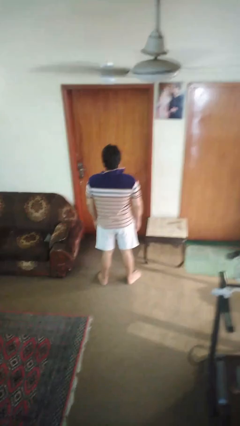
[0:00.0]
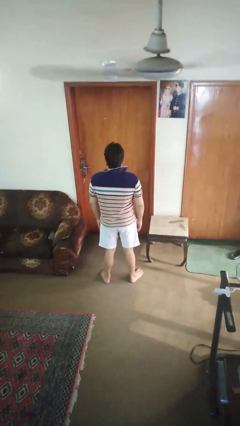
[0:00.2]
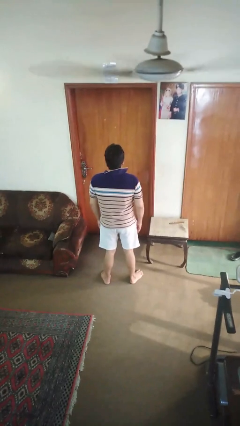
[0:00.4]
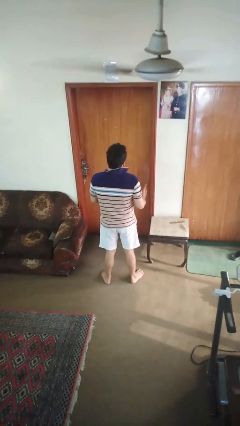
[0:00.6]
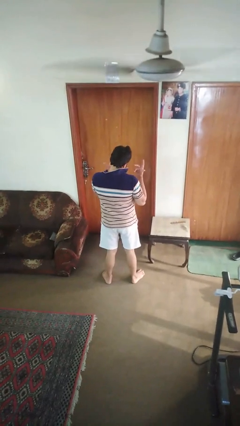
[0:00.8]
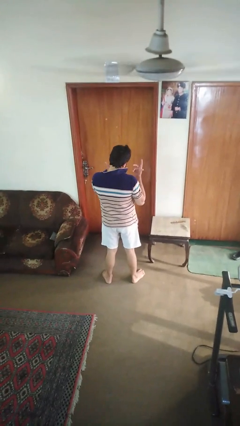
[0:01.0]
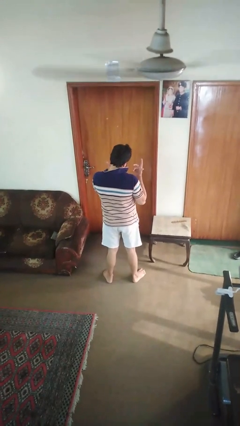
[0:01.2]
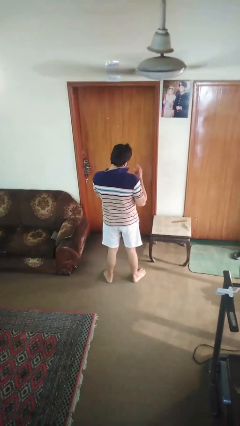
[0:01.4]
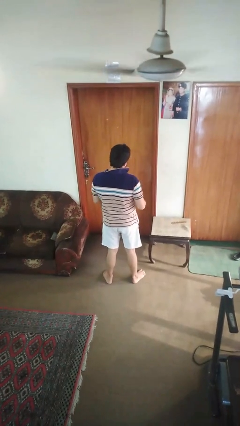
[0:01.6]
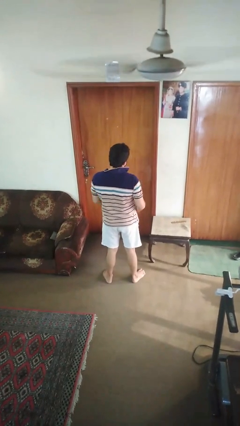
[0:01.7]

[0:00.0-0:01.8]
person shrugs

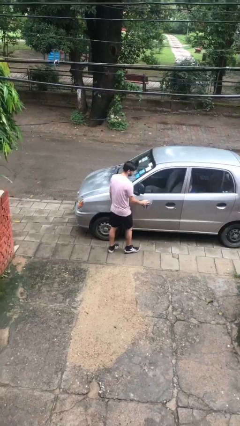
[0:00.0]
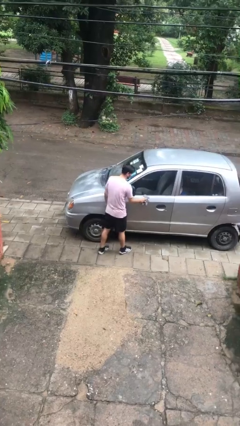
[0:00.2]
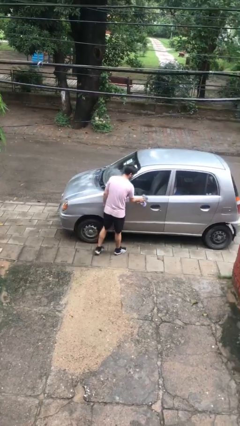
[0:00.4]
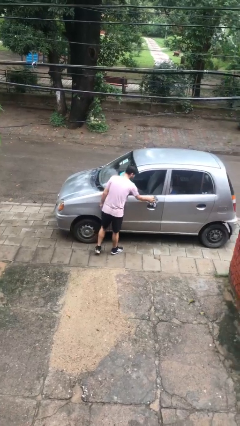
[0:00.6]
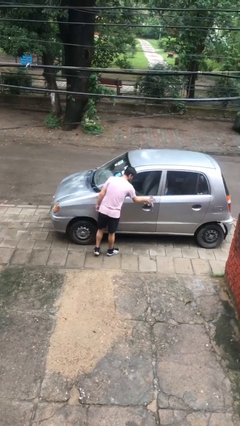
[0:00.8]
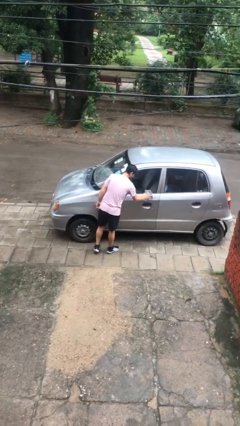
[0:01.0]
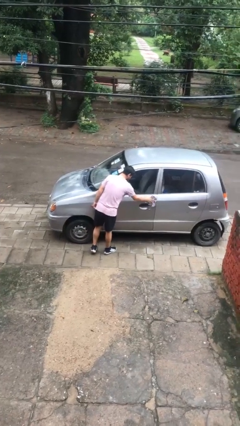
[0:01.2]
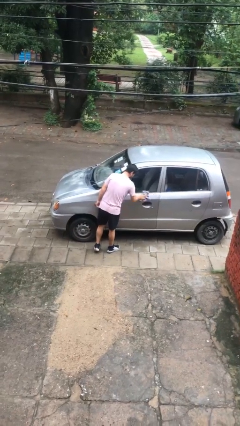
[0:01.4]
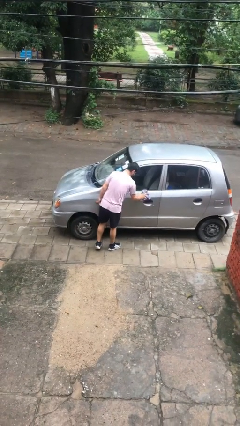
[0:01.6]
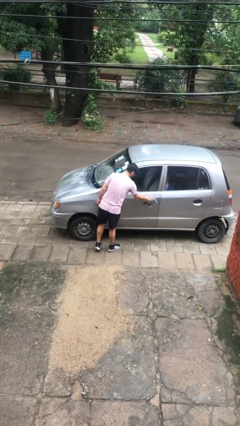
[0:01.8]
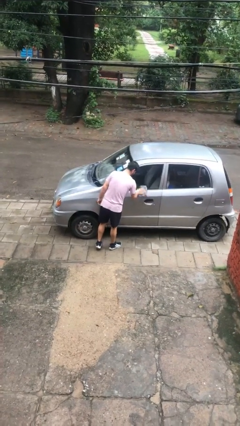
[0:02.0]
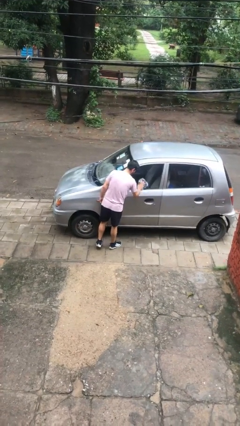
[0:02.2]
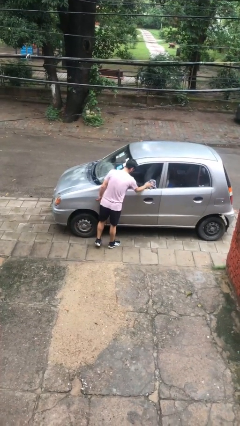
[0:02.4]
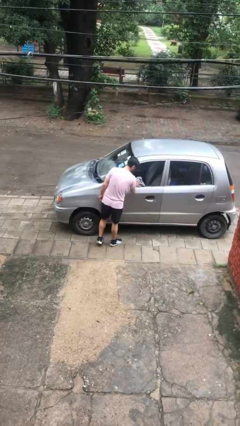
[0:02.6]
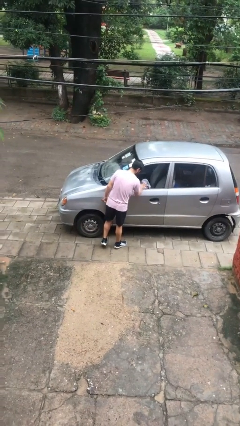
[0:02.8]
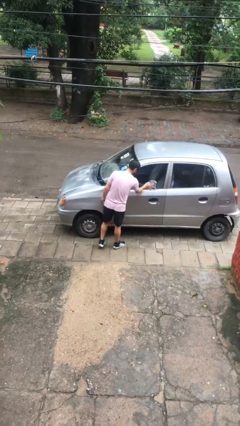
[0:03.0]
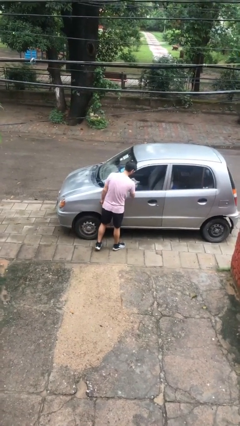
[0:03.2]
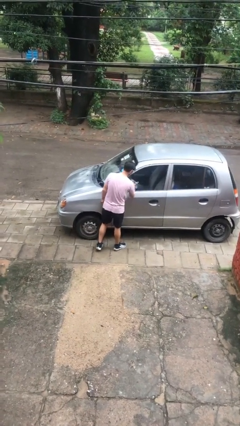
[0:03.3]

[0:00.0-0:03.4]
person polishes car with rag

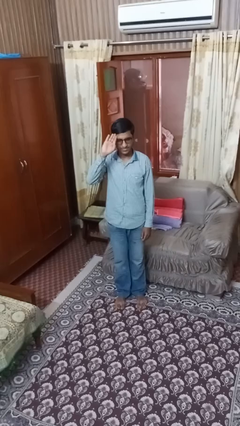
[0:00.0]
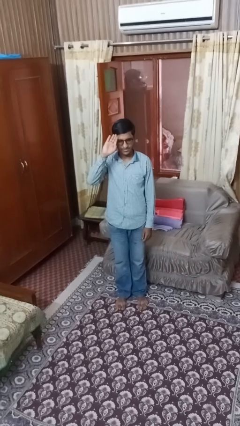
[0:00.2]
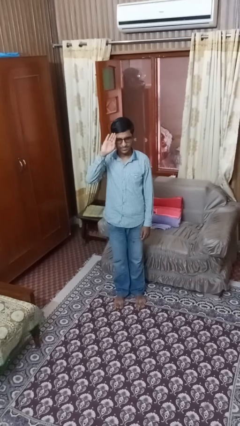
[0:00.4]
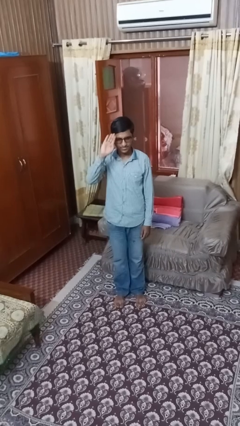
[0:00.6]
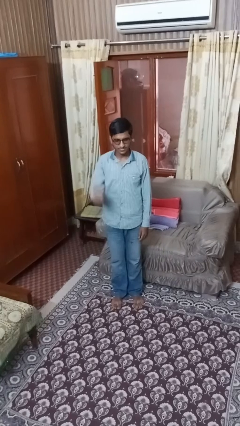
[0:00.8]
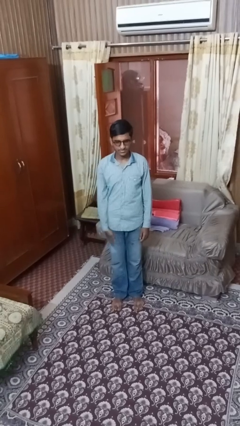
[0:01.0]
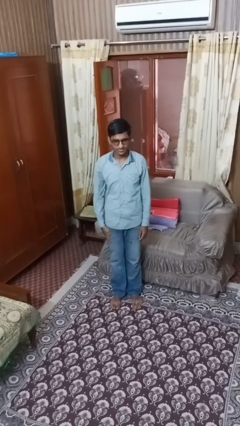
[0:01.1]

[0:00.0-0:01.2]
person salutes

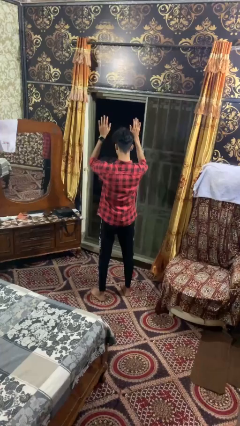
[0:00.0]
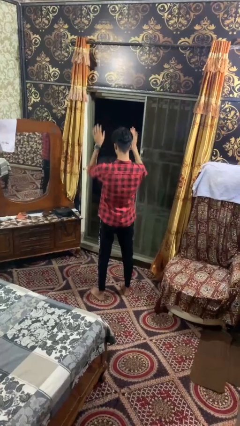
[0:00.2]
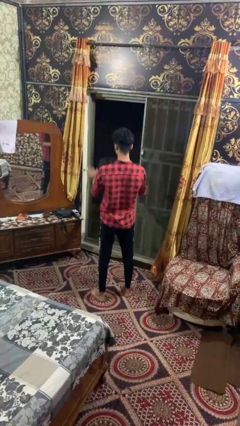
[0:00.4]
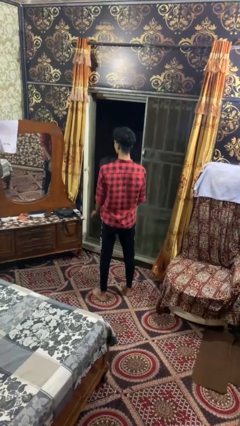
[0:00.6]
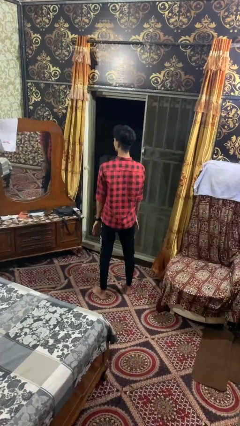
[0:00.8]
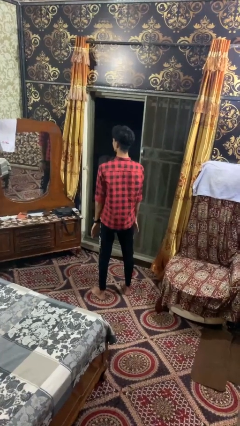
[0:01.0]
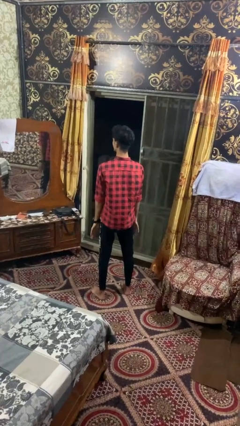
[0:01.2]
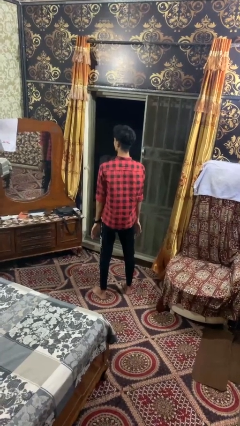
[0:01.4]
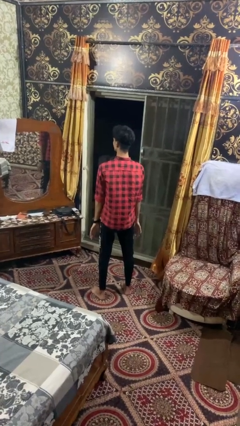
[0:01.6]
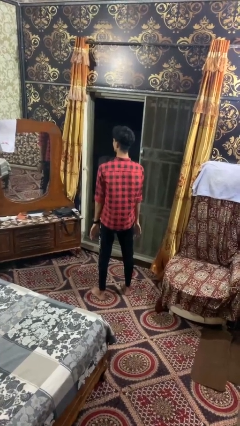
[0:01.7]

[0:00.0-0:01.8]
person gestures swipe down

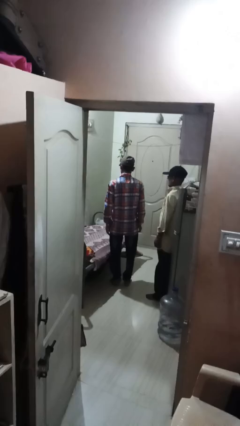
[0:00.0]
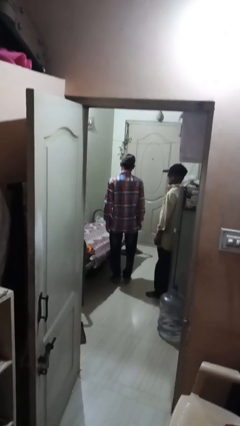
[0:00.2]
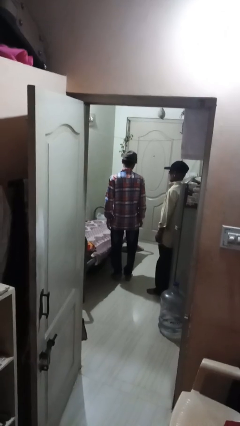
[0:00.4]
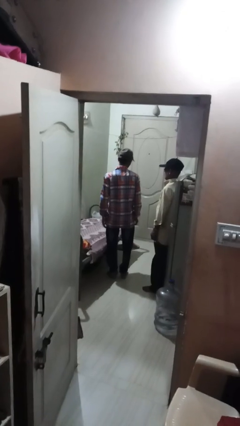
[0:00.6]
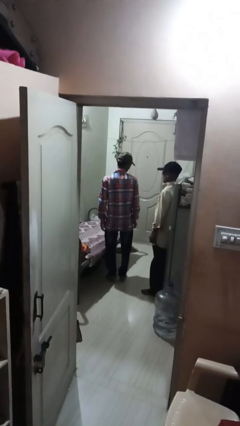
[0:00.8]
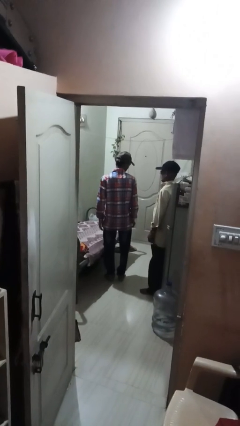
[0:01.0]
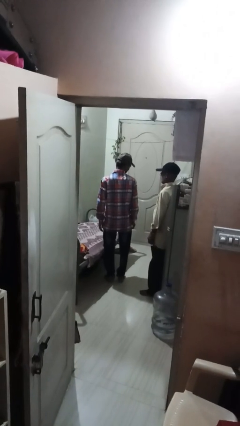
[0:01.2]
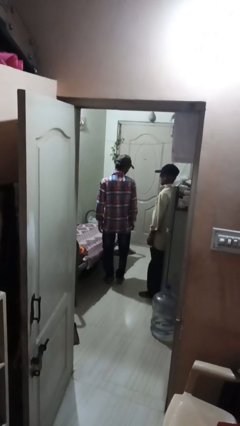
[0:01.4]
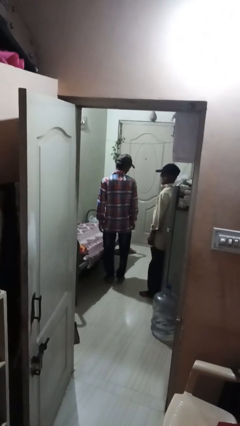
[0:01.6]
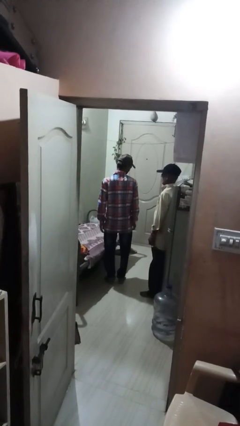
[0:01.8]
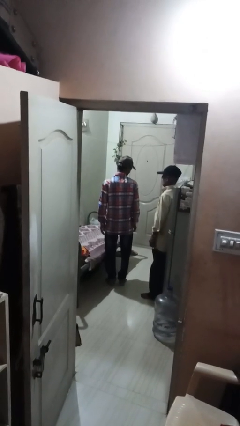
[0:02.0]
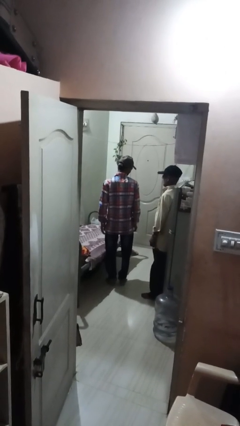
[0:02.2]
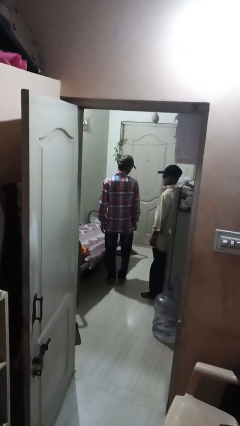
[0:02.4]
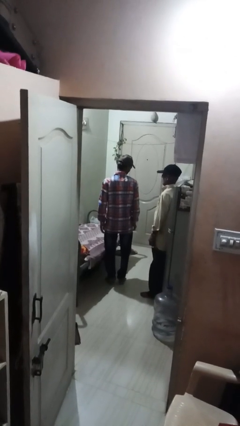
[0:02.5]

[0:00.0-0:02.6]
person looks over shoulder

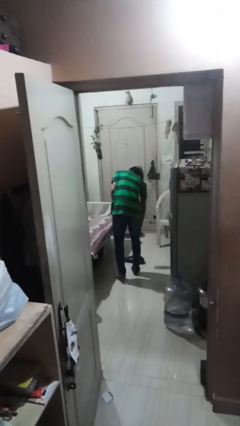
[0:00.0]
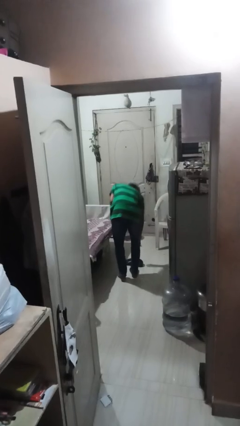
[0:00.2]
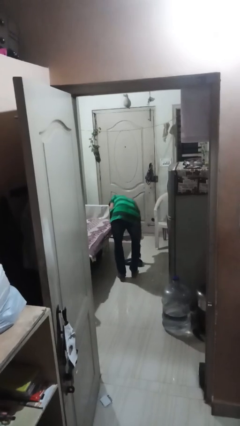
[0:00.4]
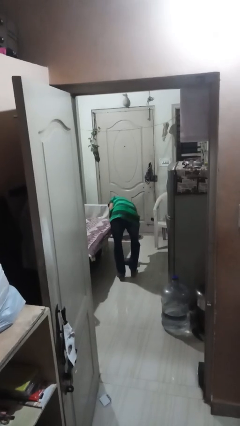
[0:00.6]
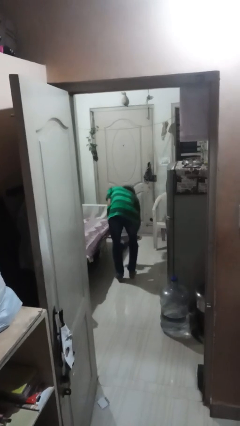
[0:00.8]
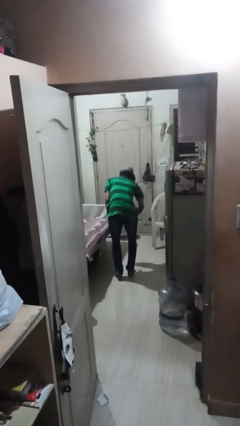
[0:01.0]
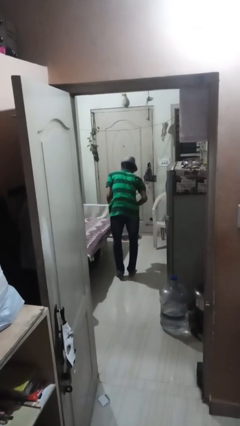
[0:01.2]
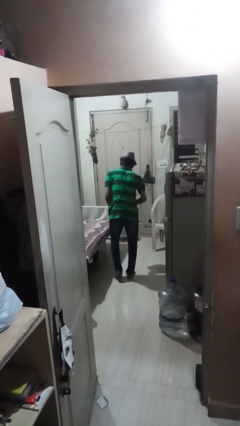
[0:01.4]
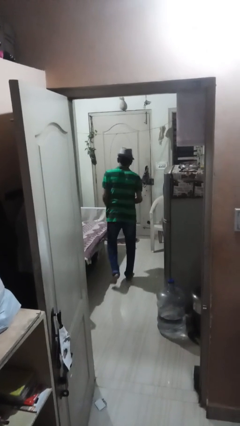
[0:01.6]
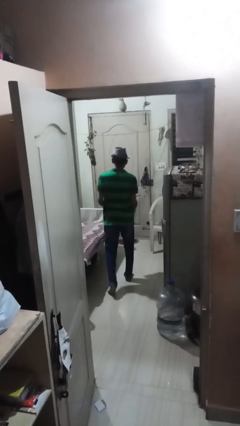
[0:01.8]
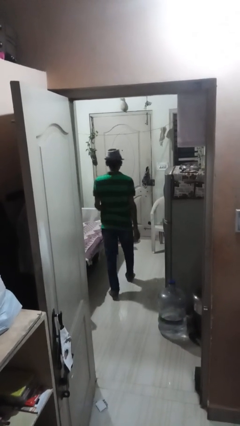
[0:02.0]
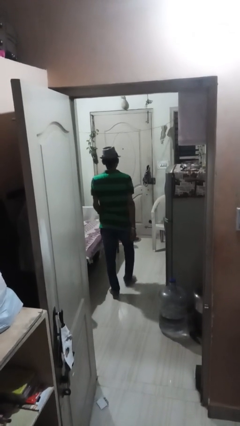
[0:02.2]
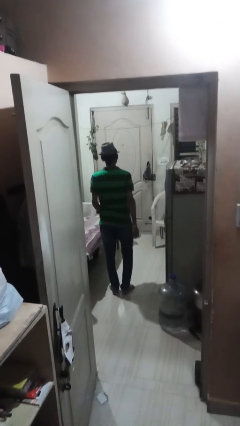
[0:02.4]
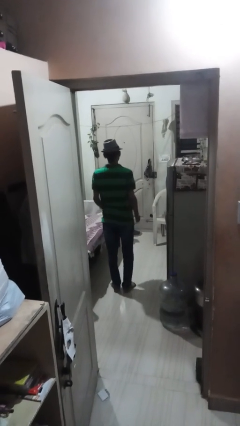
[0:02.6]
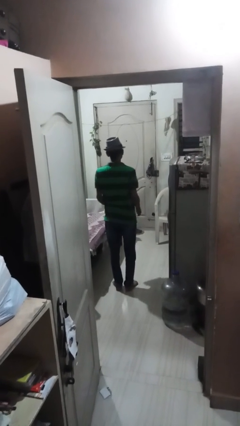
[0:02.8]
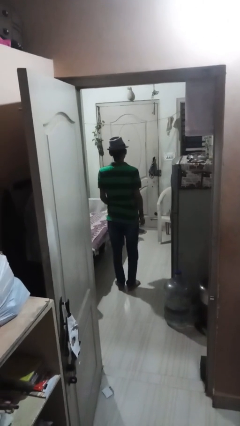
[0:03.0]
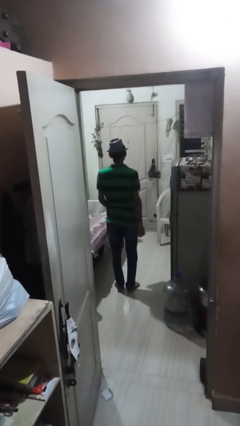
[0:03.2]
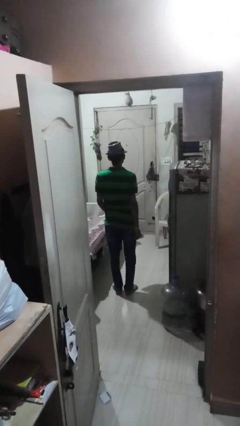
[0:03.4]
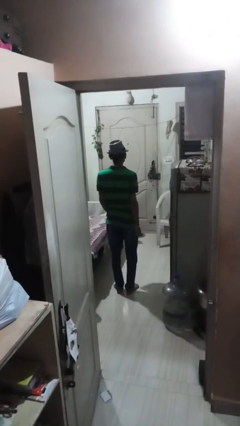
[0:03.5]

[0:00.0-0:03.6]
person picks up object from floor

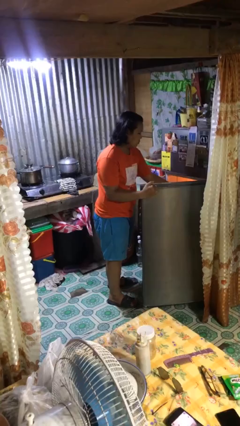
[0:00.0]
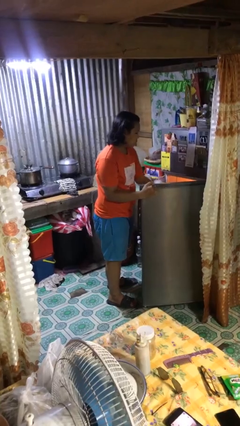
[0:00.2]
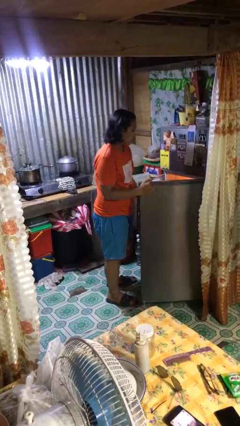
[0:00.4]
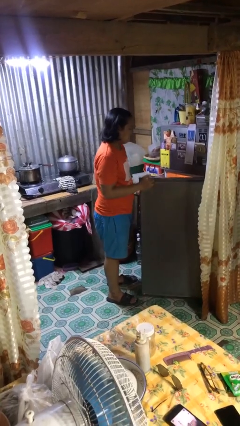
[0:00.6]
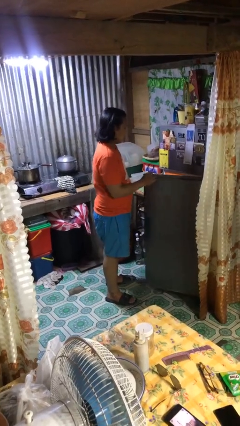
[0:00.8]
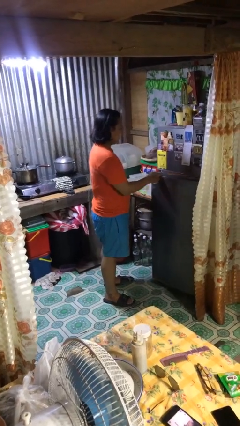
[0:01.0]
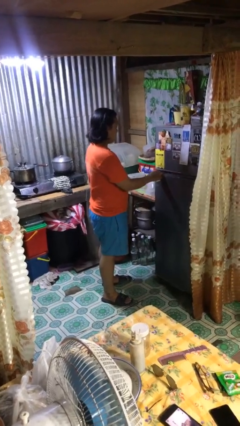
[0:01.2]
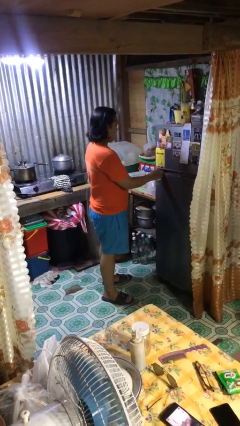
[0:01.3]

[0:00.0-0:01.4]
person closes refrigerator

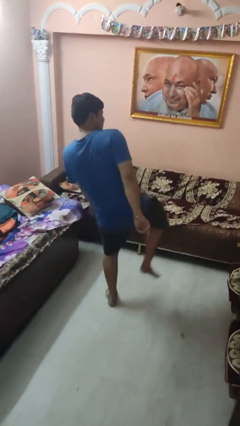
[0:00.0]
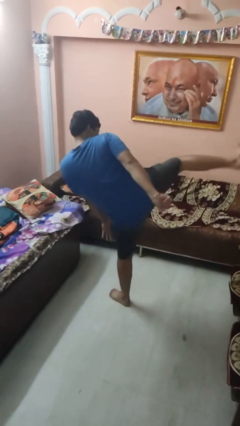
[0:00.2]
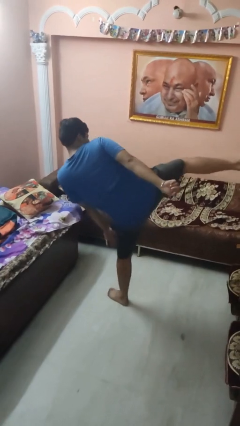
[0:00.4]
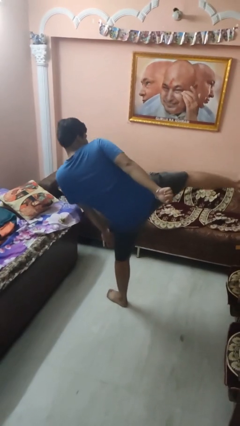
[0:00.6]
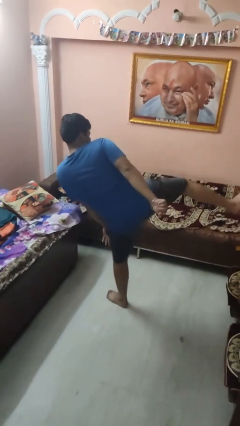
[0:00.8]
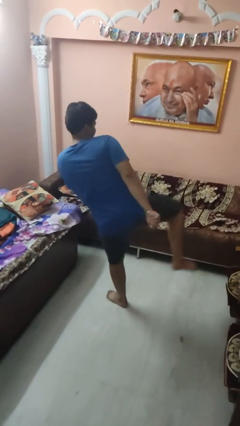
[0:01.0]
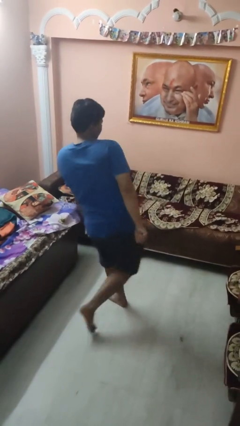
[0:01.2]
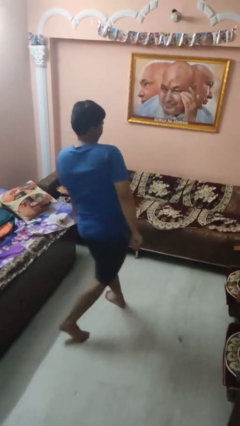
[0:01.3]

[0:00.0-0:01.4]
person karate kicks
